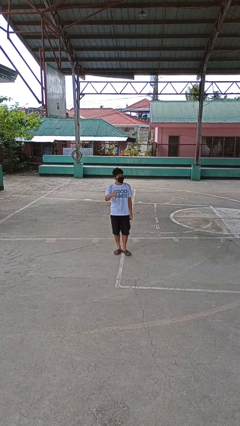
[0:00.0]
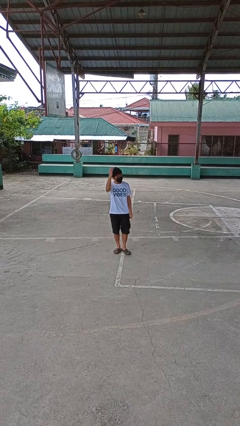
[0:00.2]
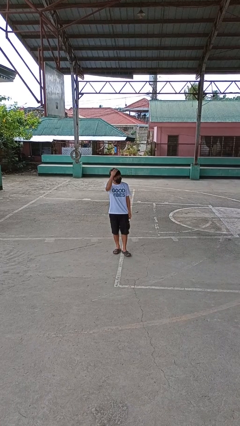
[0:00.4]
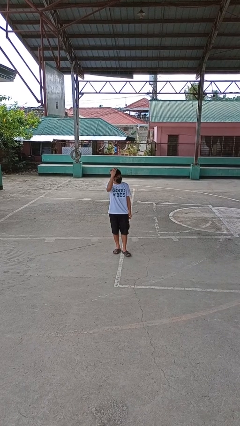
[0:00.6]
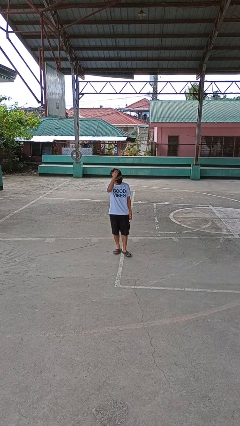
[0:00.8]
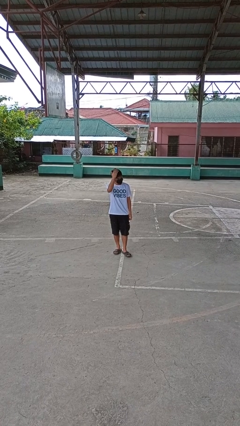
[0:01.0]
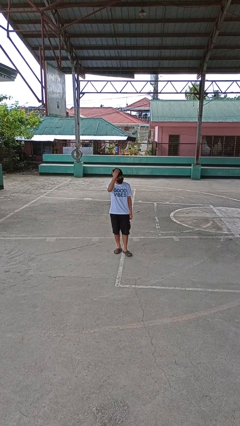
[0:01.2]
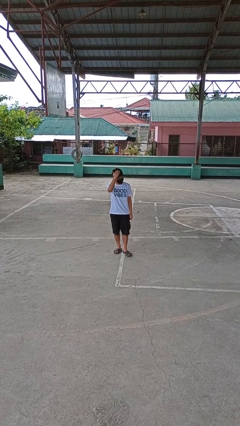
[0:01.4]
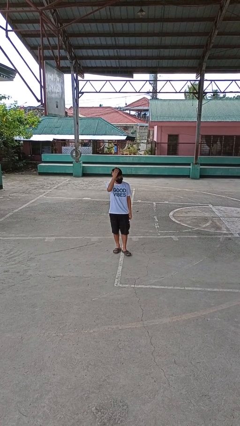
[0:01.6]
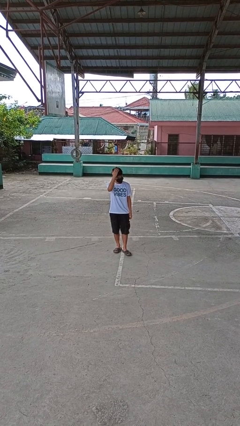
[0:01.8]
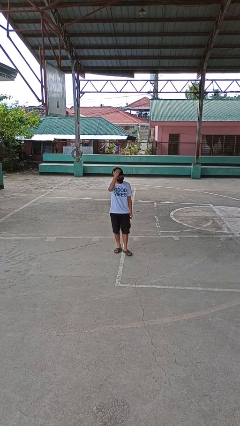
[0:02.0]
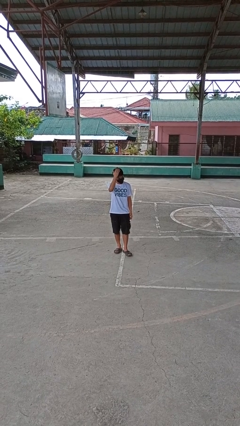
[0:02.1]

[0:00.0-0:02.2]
person pats head

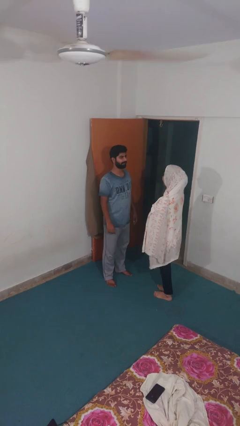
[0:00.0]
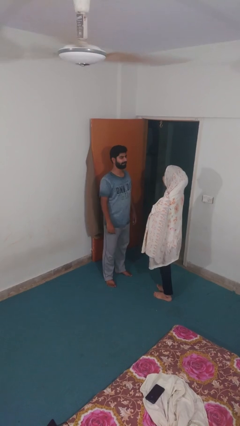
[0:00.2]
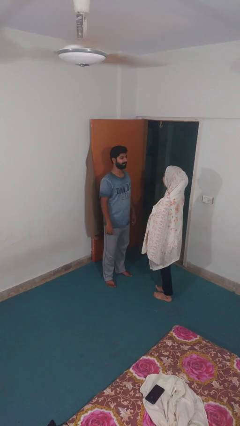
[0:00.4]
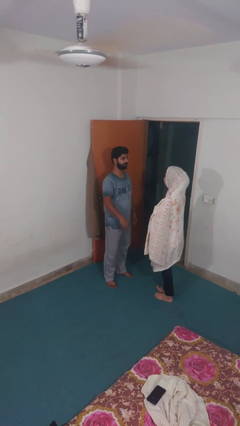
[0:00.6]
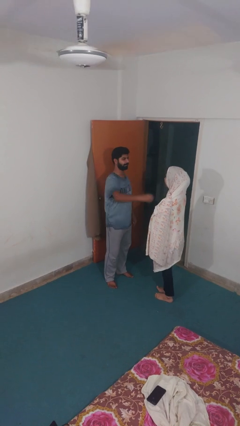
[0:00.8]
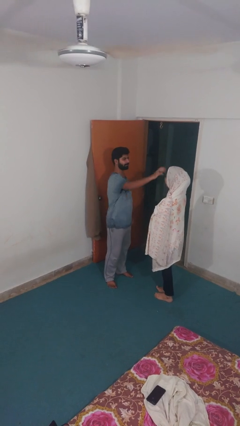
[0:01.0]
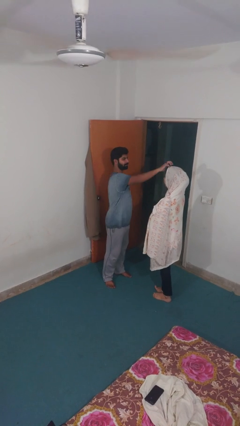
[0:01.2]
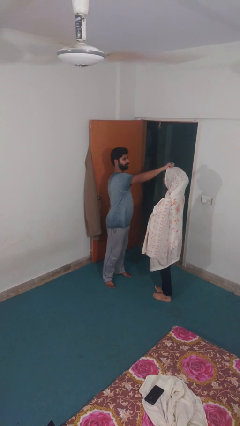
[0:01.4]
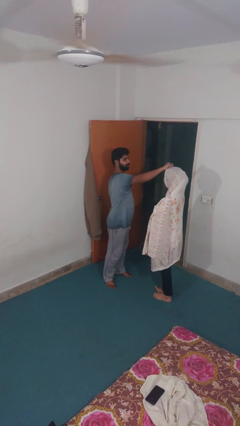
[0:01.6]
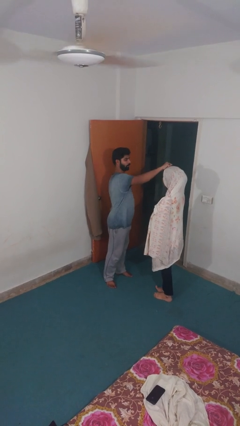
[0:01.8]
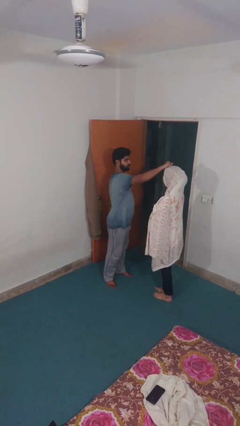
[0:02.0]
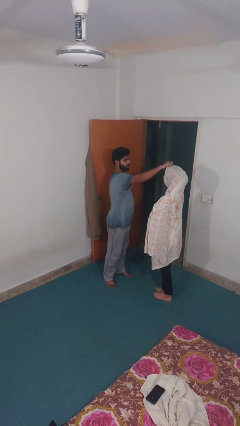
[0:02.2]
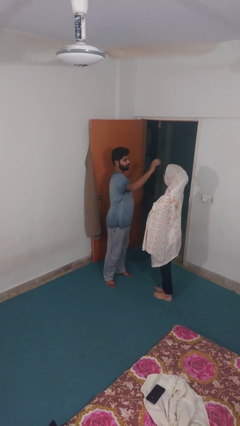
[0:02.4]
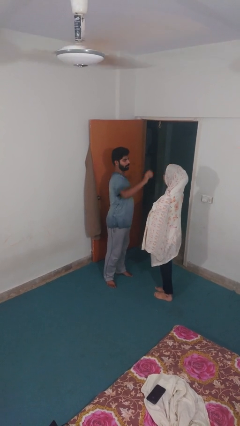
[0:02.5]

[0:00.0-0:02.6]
person grabs person by hair

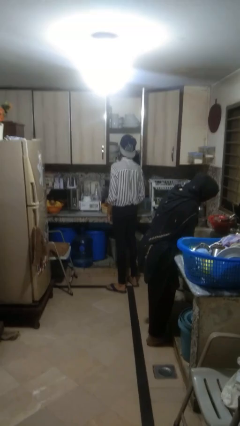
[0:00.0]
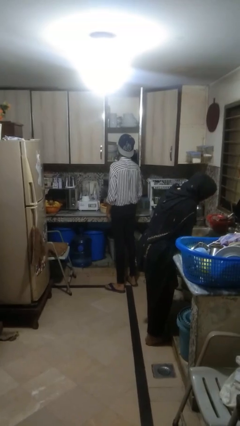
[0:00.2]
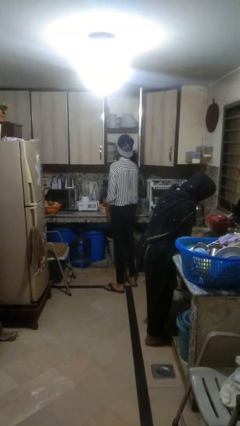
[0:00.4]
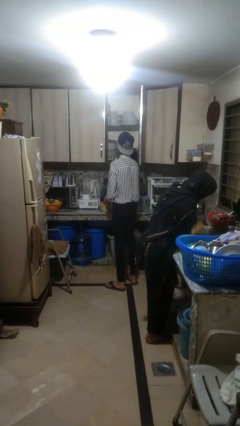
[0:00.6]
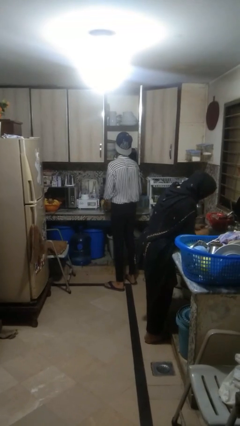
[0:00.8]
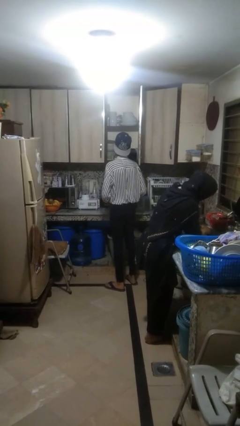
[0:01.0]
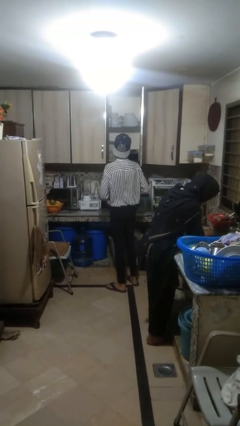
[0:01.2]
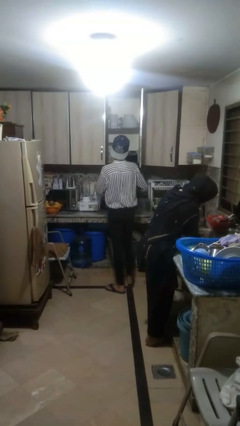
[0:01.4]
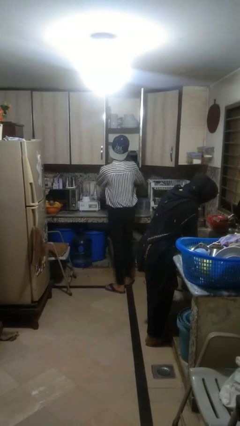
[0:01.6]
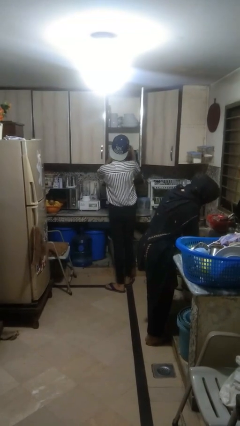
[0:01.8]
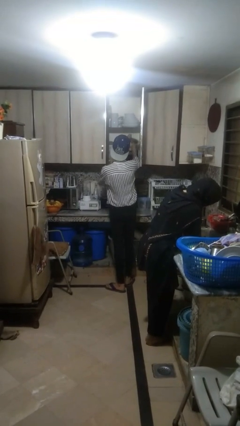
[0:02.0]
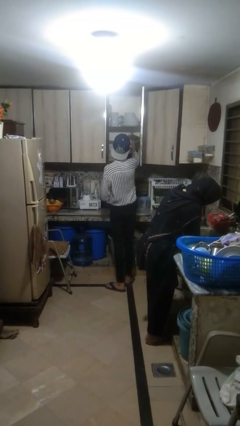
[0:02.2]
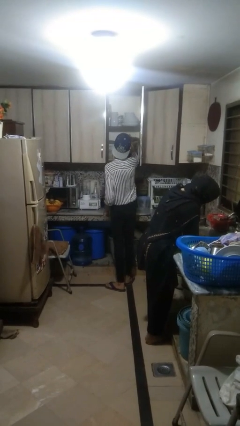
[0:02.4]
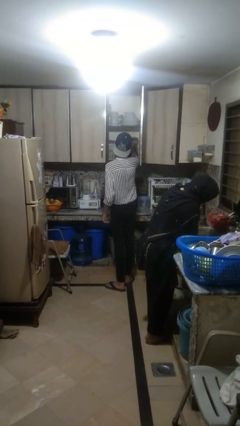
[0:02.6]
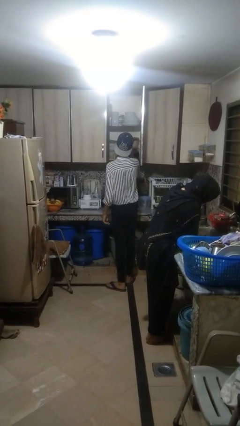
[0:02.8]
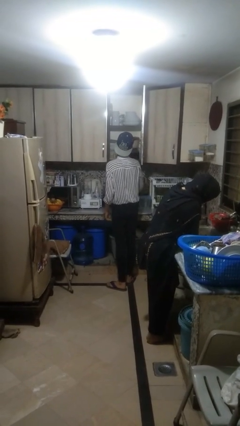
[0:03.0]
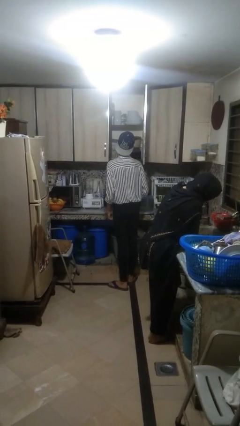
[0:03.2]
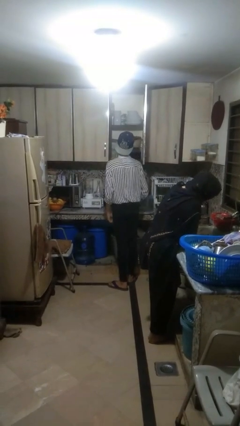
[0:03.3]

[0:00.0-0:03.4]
person puts object in cabinet

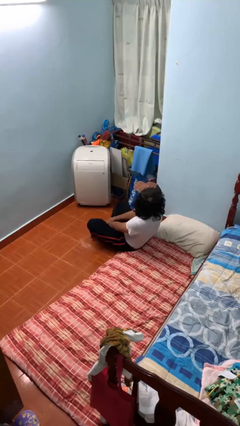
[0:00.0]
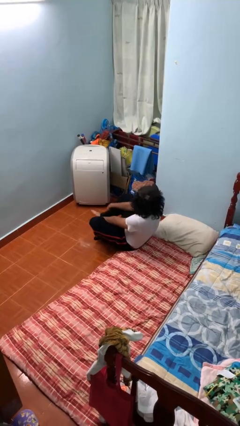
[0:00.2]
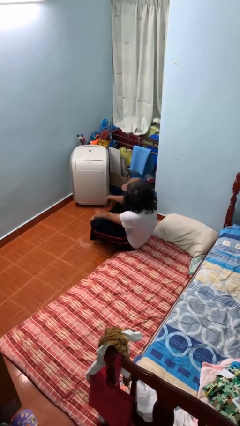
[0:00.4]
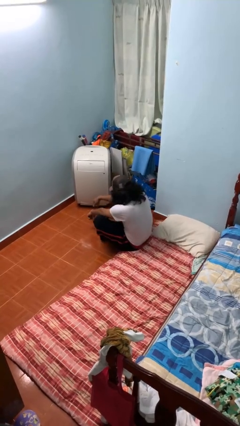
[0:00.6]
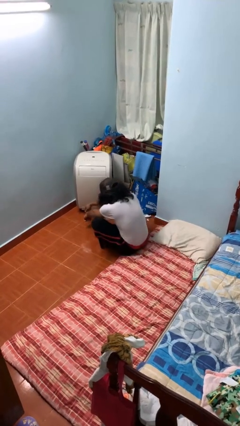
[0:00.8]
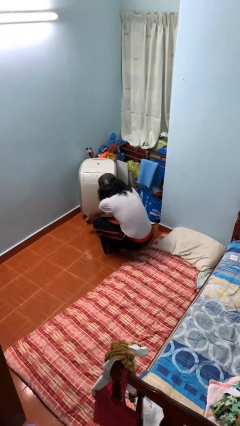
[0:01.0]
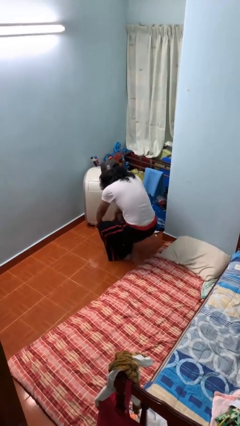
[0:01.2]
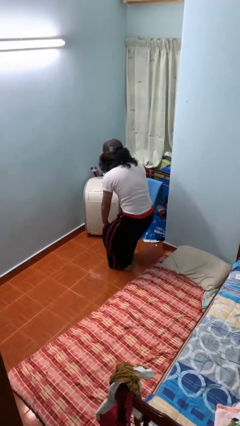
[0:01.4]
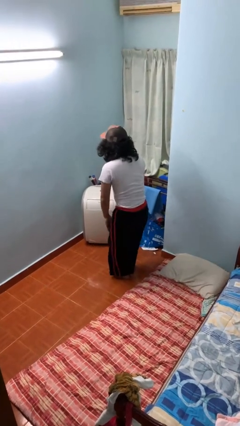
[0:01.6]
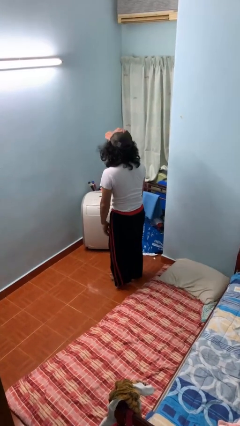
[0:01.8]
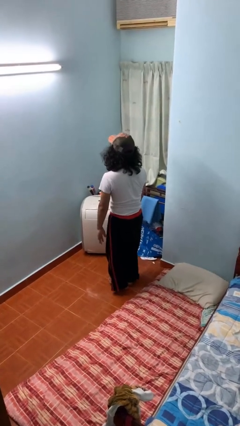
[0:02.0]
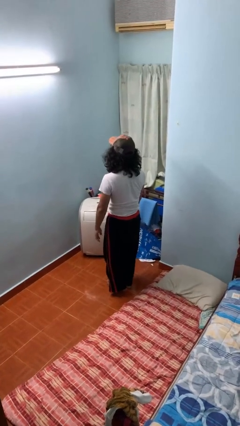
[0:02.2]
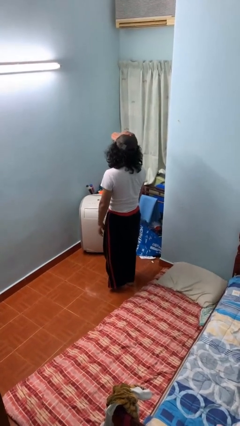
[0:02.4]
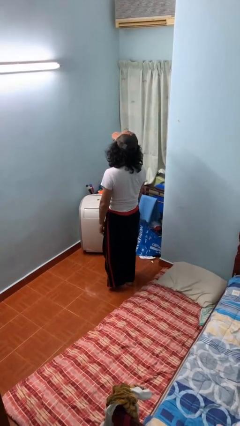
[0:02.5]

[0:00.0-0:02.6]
person stands up from floor

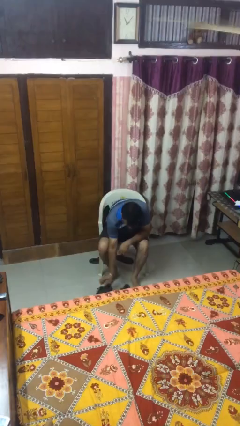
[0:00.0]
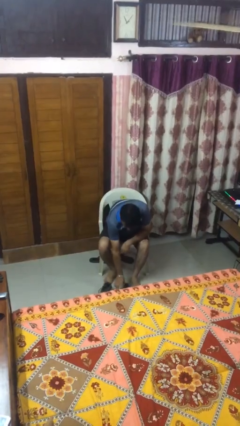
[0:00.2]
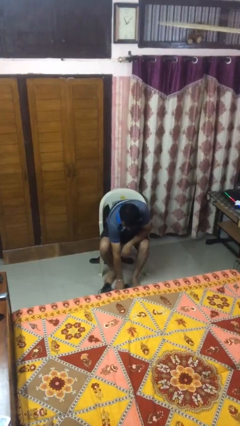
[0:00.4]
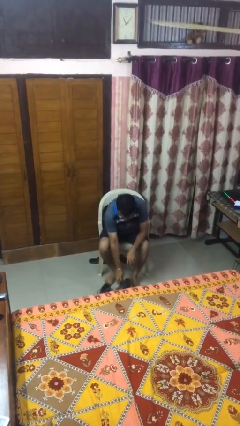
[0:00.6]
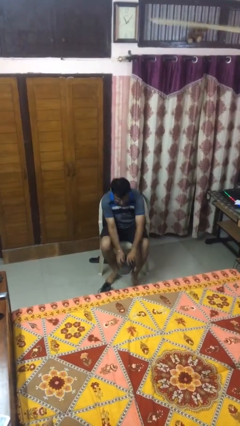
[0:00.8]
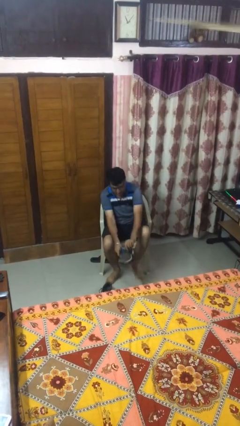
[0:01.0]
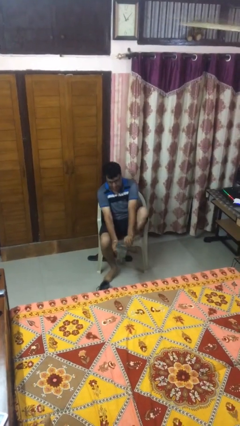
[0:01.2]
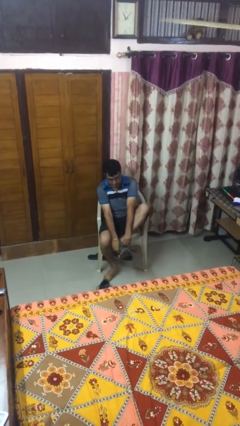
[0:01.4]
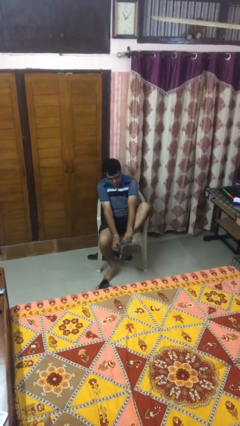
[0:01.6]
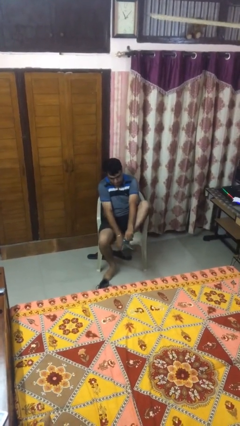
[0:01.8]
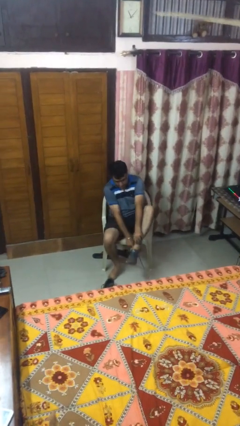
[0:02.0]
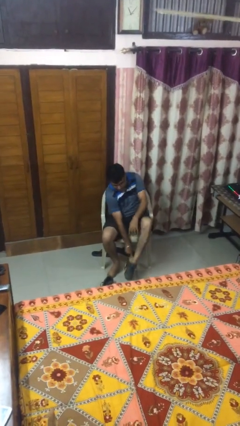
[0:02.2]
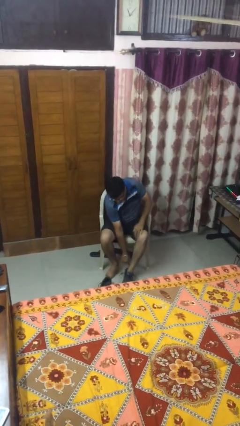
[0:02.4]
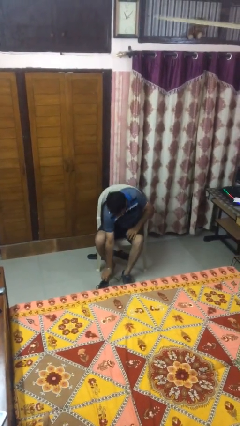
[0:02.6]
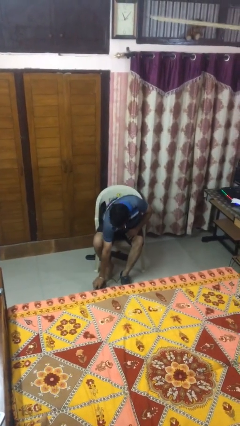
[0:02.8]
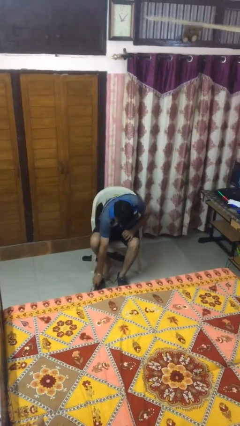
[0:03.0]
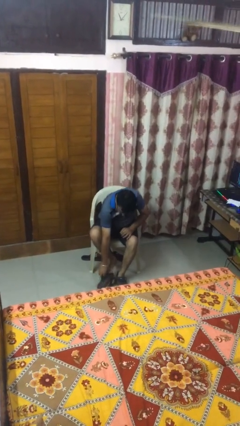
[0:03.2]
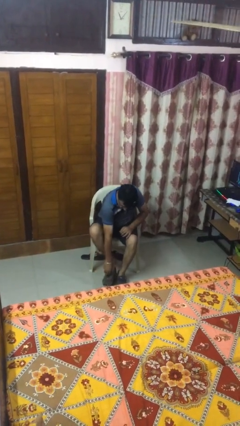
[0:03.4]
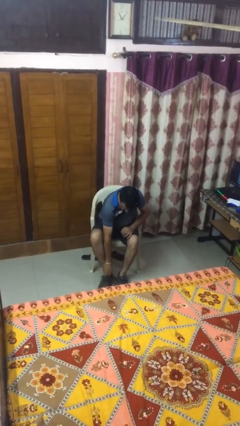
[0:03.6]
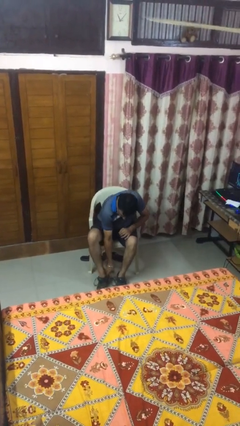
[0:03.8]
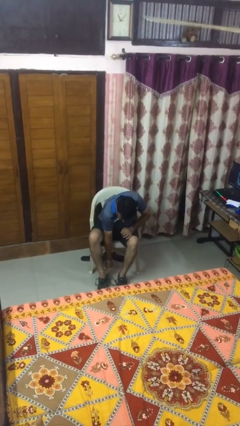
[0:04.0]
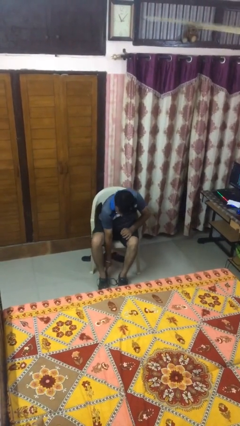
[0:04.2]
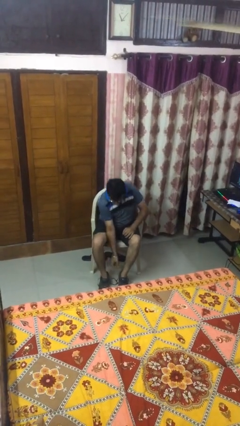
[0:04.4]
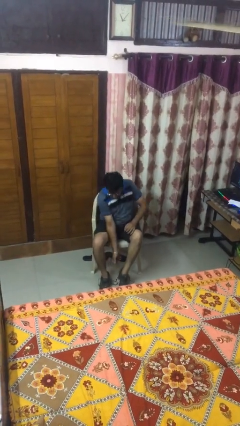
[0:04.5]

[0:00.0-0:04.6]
person puts on shoes

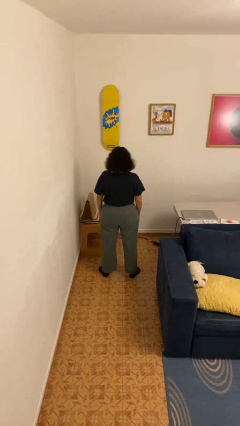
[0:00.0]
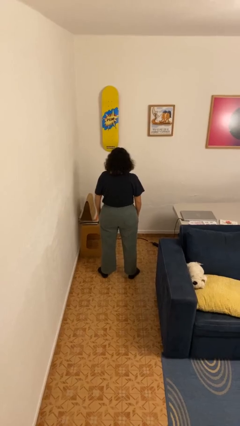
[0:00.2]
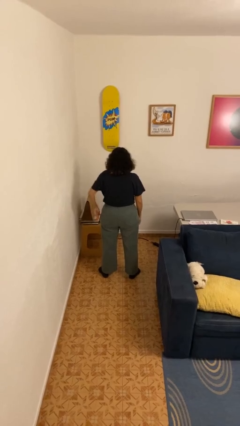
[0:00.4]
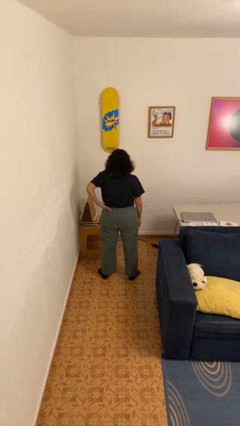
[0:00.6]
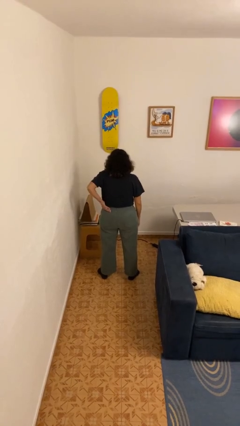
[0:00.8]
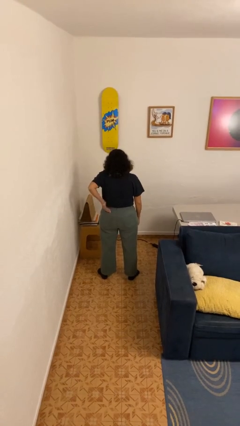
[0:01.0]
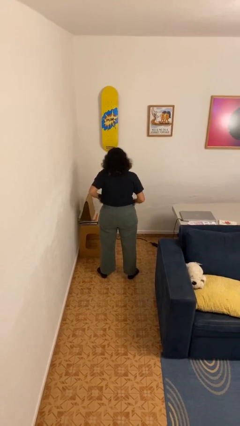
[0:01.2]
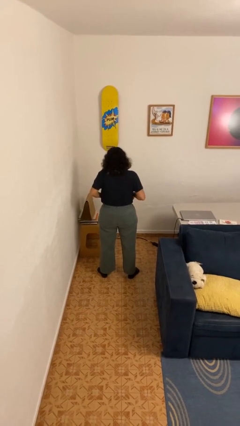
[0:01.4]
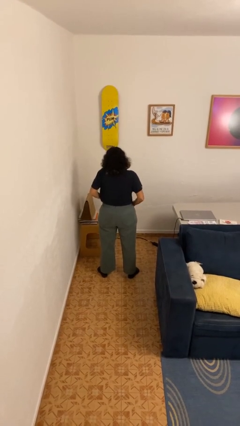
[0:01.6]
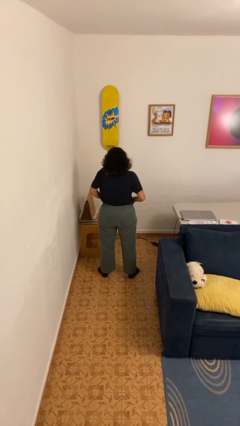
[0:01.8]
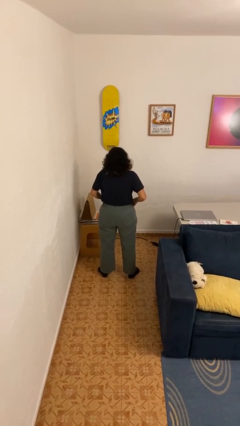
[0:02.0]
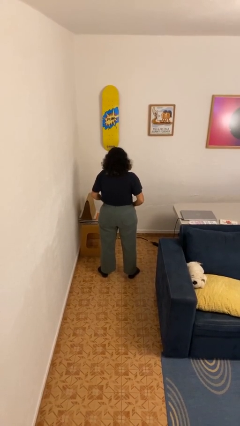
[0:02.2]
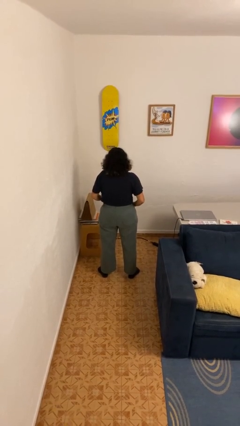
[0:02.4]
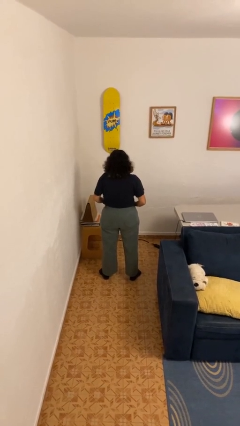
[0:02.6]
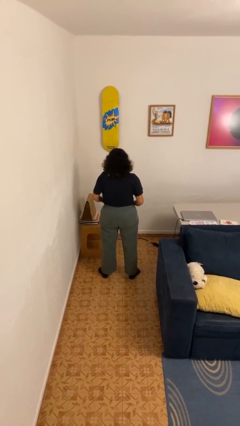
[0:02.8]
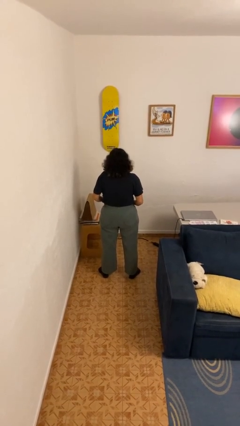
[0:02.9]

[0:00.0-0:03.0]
person puts hands in back pockets
